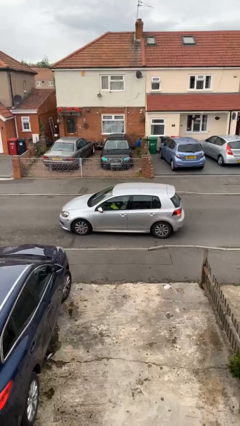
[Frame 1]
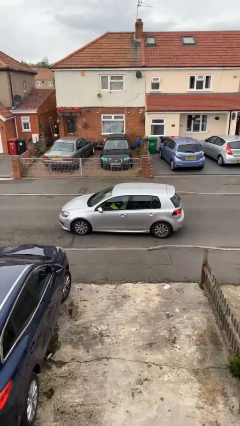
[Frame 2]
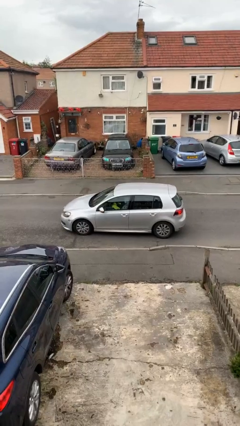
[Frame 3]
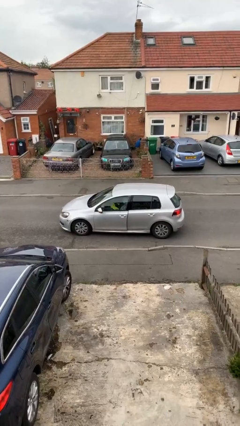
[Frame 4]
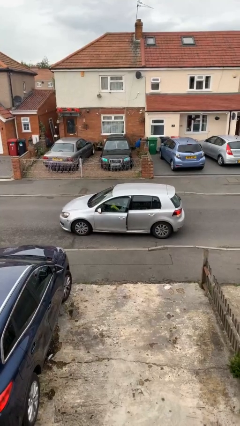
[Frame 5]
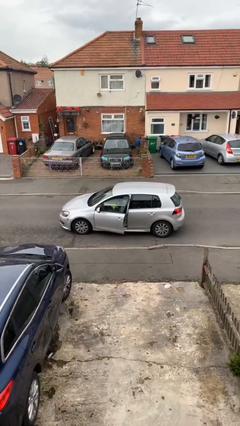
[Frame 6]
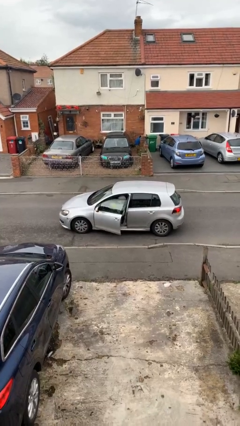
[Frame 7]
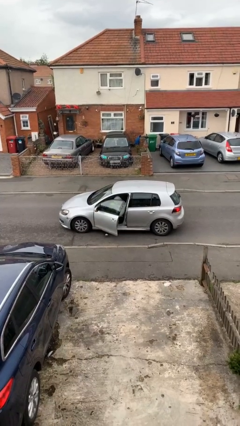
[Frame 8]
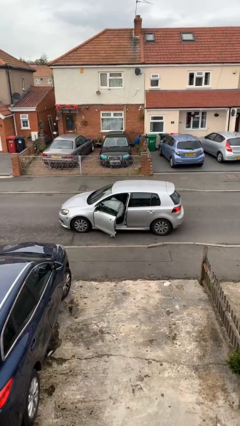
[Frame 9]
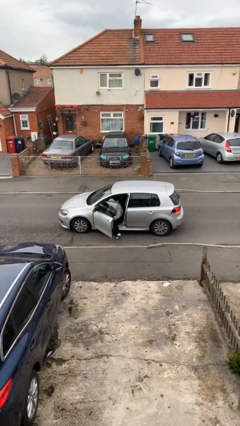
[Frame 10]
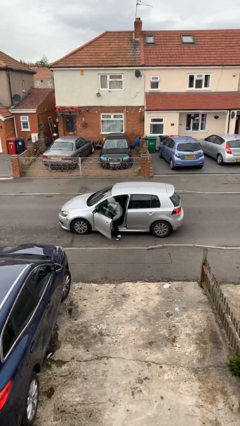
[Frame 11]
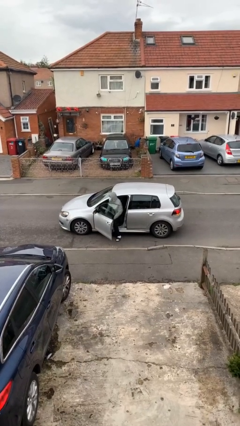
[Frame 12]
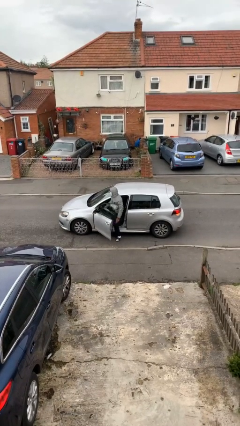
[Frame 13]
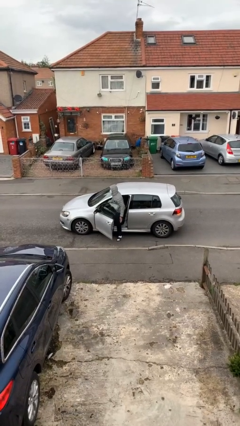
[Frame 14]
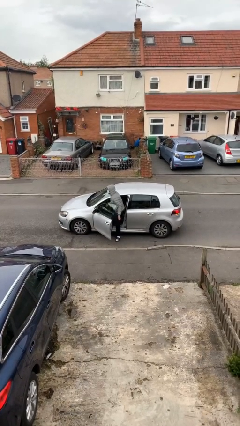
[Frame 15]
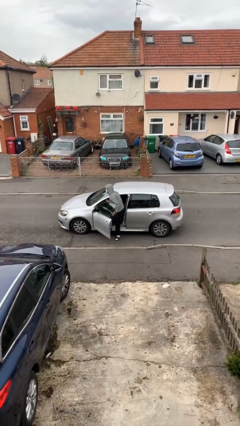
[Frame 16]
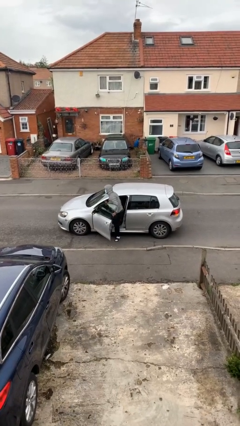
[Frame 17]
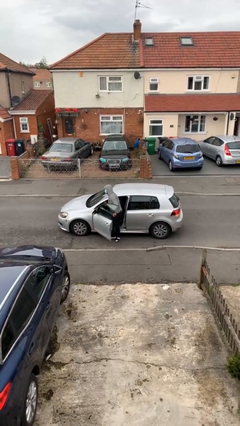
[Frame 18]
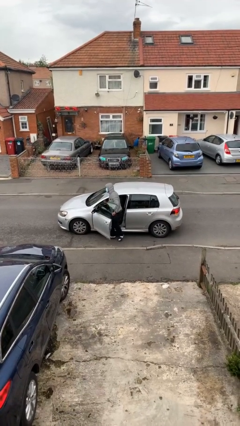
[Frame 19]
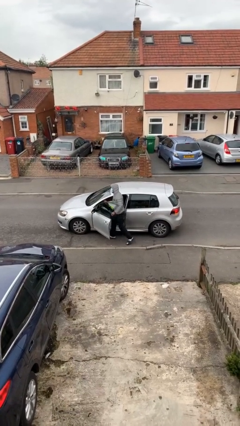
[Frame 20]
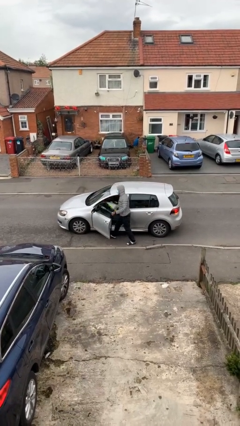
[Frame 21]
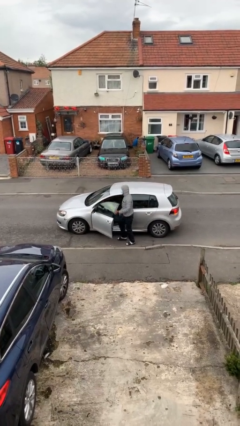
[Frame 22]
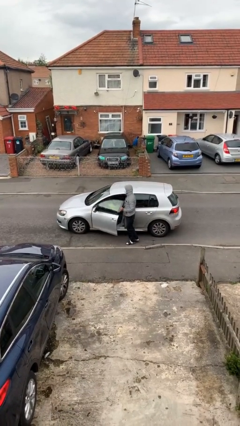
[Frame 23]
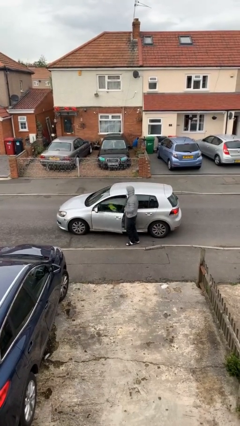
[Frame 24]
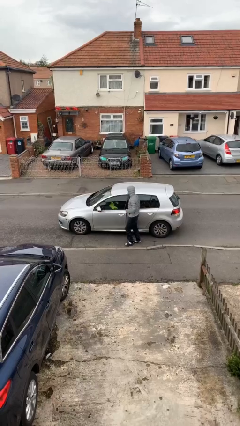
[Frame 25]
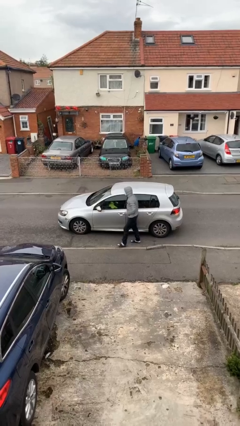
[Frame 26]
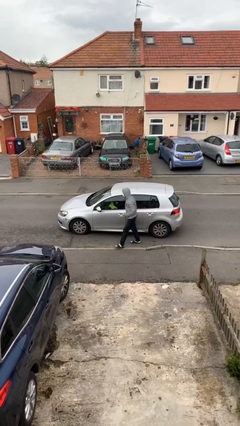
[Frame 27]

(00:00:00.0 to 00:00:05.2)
car drops off person

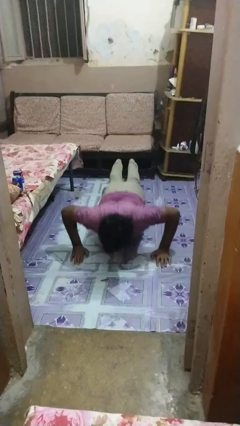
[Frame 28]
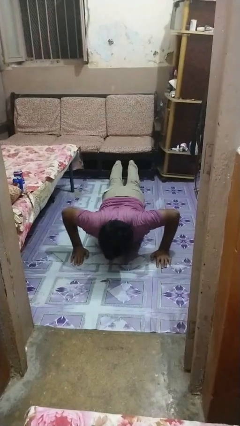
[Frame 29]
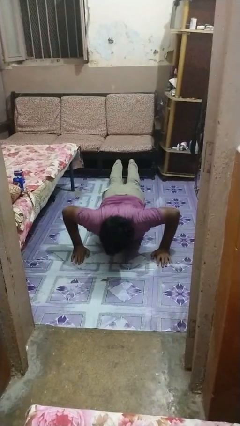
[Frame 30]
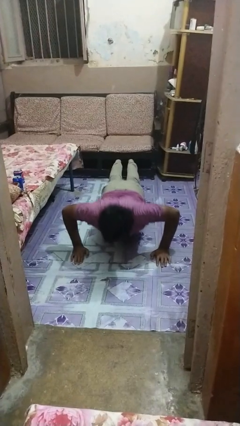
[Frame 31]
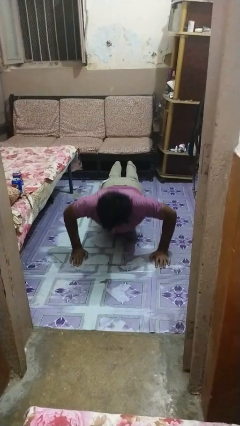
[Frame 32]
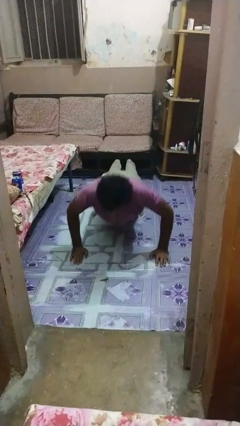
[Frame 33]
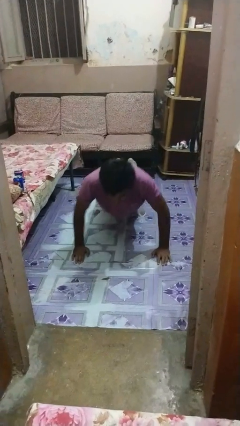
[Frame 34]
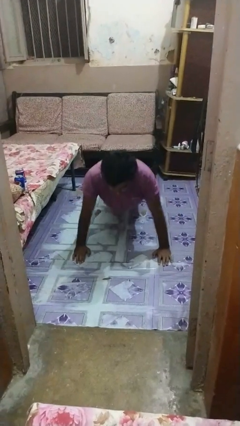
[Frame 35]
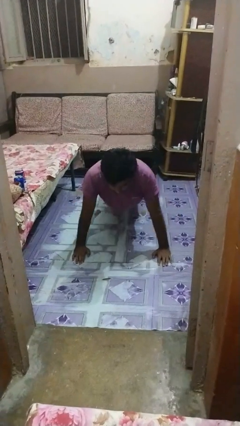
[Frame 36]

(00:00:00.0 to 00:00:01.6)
person exercises with pushup

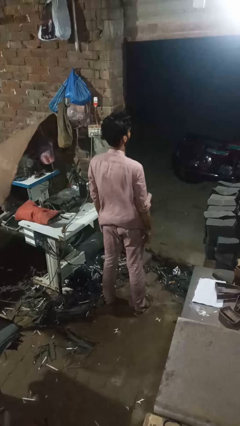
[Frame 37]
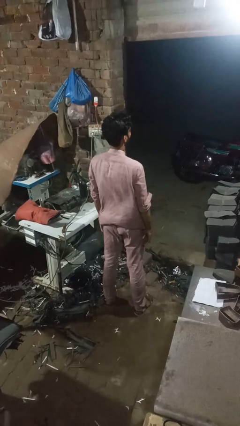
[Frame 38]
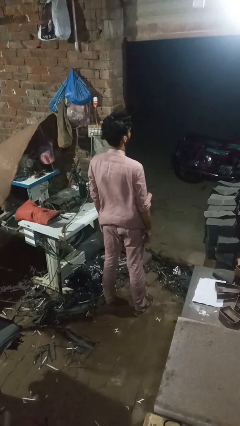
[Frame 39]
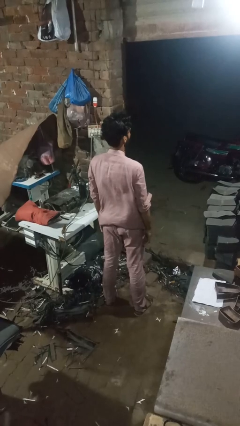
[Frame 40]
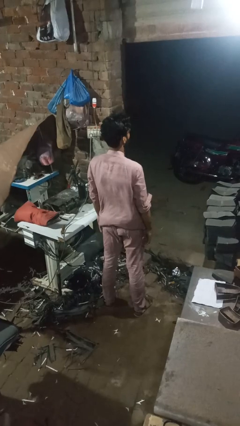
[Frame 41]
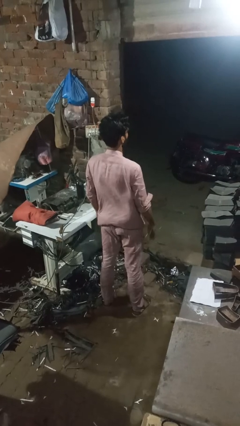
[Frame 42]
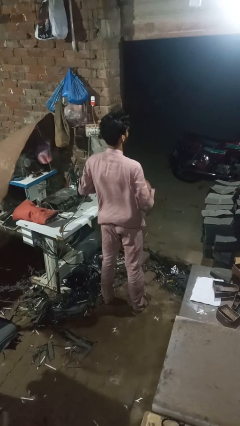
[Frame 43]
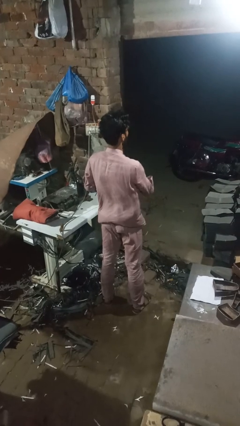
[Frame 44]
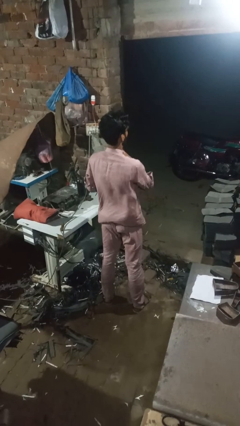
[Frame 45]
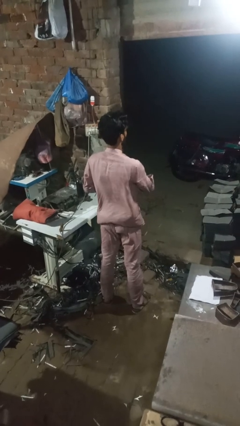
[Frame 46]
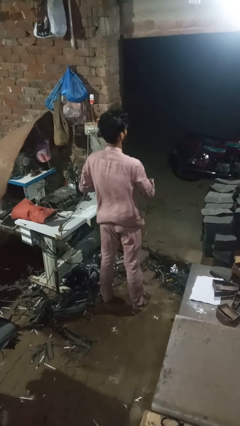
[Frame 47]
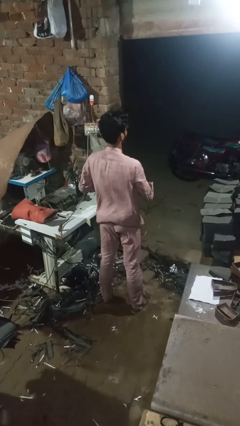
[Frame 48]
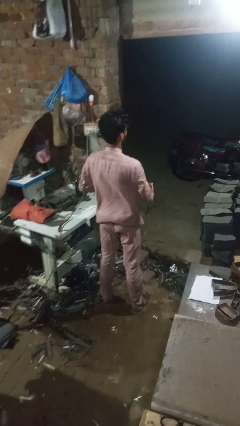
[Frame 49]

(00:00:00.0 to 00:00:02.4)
person unbuttons shirt

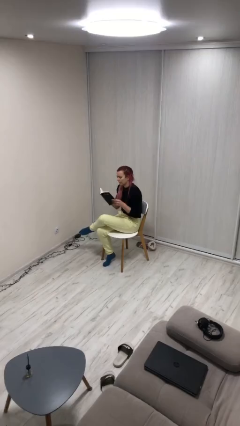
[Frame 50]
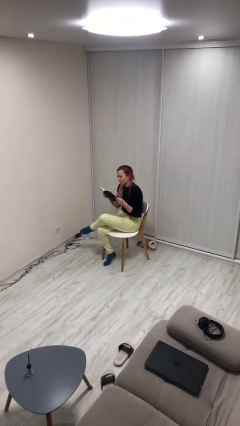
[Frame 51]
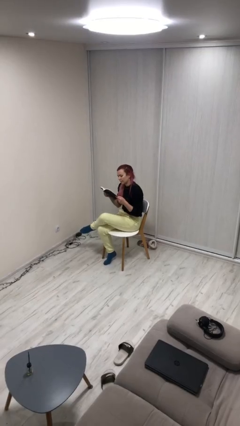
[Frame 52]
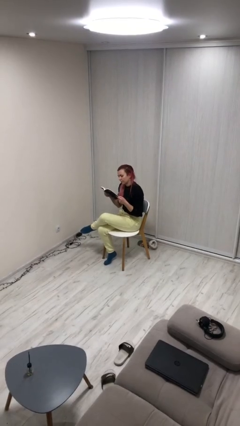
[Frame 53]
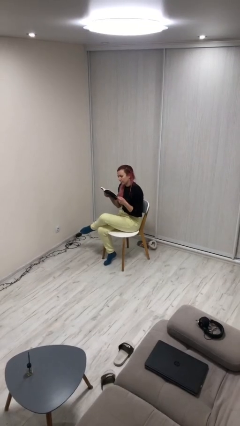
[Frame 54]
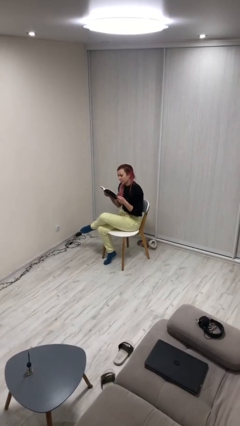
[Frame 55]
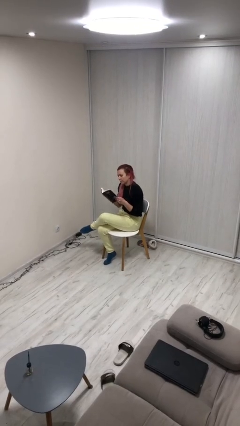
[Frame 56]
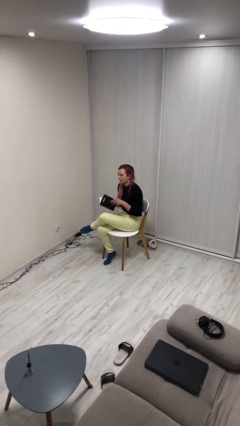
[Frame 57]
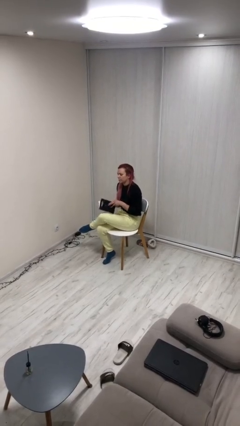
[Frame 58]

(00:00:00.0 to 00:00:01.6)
person reads document

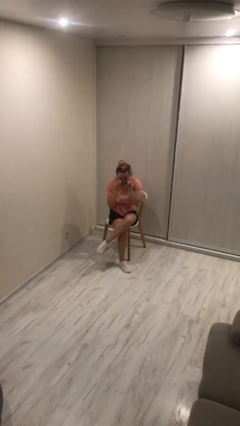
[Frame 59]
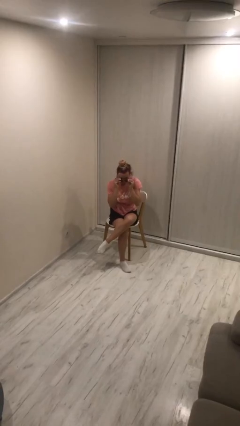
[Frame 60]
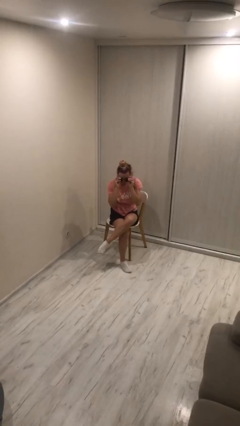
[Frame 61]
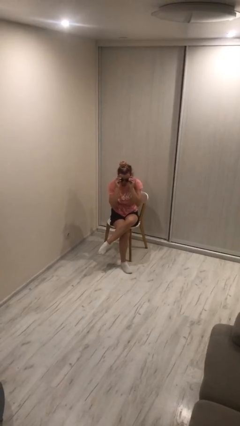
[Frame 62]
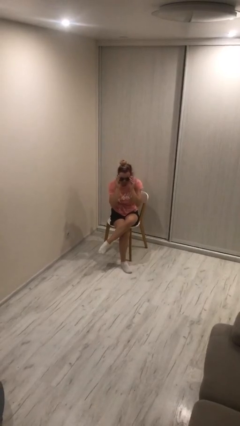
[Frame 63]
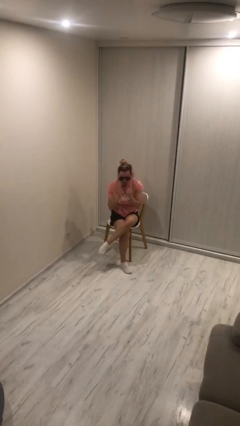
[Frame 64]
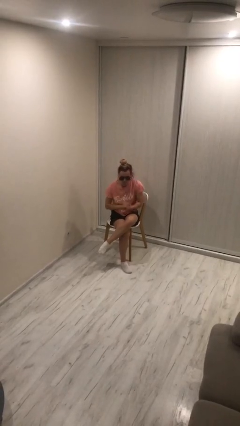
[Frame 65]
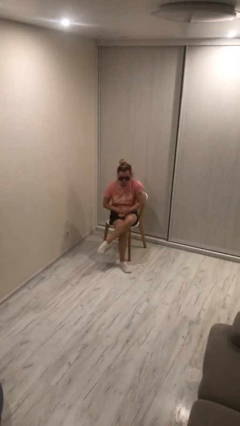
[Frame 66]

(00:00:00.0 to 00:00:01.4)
person puts on sunglasses

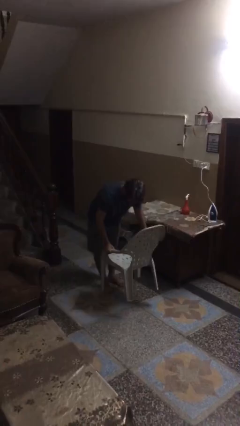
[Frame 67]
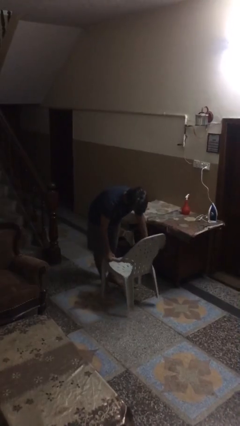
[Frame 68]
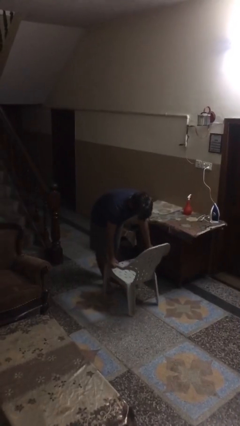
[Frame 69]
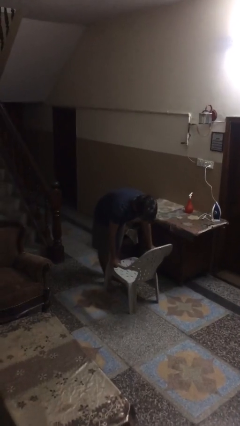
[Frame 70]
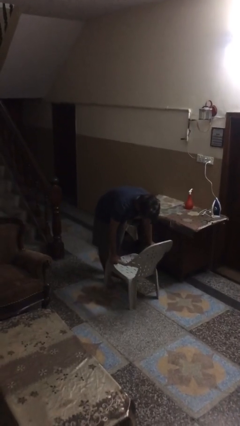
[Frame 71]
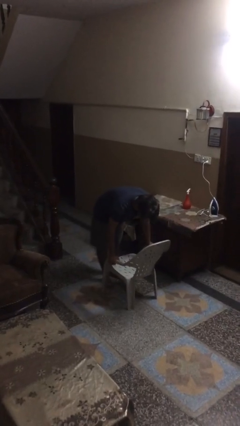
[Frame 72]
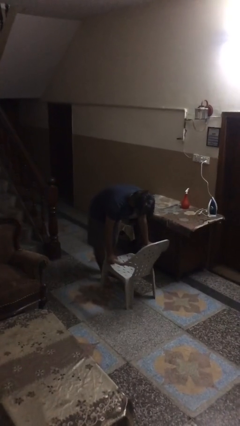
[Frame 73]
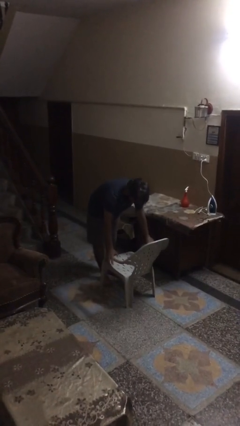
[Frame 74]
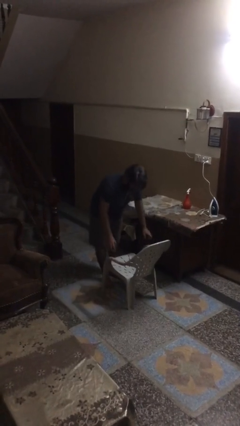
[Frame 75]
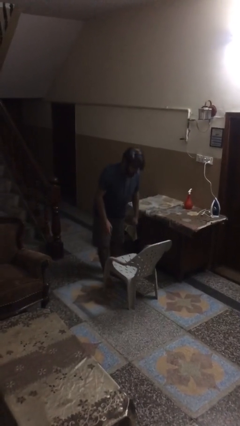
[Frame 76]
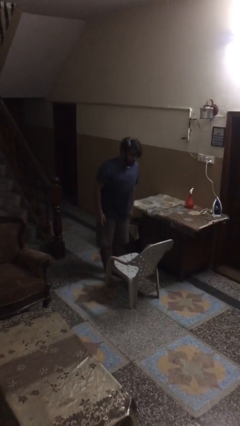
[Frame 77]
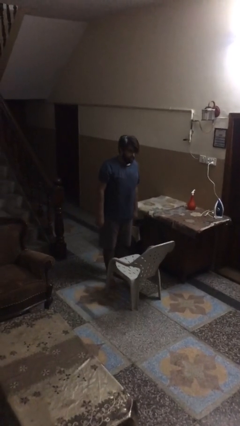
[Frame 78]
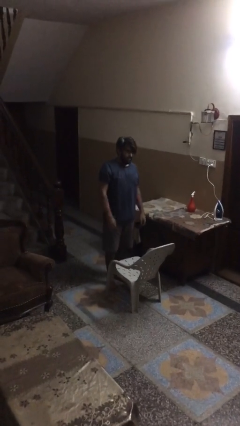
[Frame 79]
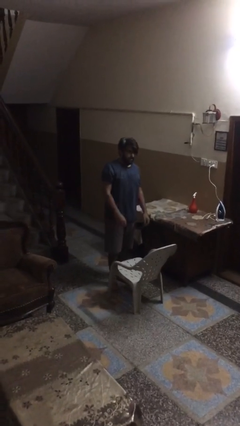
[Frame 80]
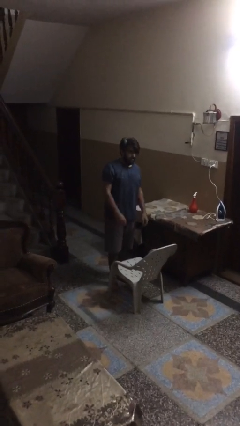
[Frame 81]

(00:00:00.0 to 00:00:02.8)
person puts down object on floor

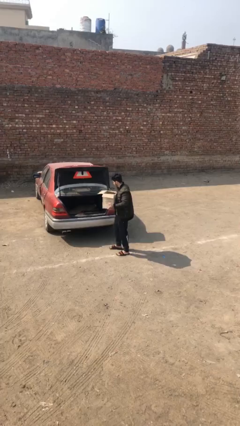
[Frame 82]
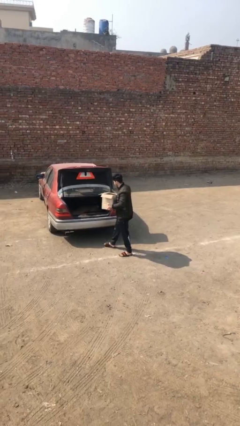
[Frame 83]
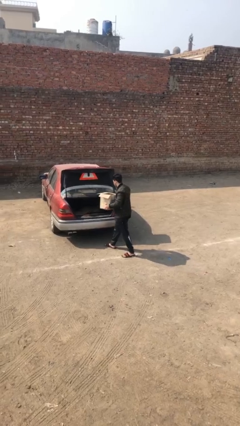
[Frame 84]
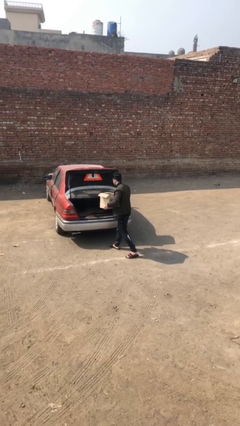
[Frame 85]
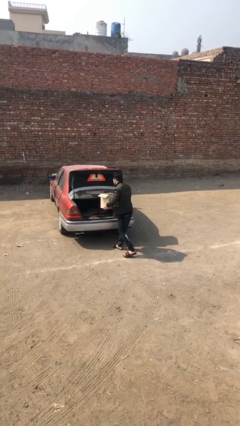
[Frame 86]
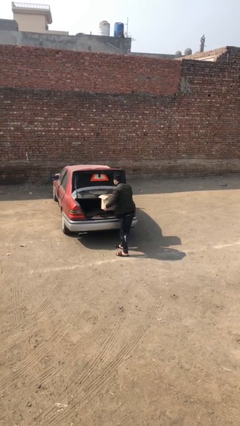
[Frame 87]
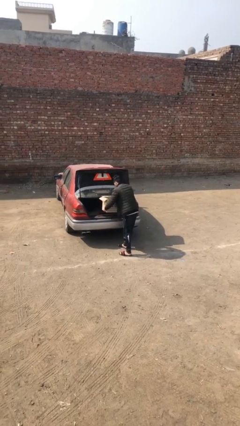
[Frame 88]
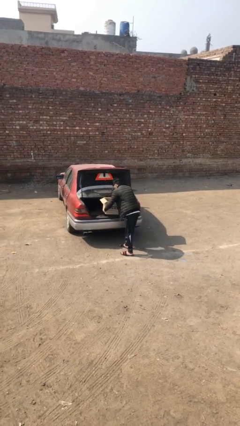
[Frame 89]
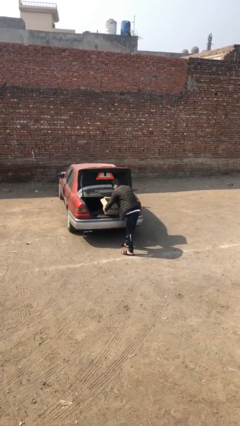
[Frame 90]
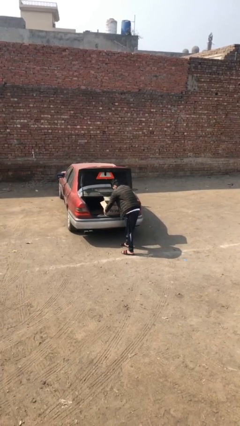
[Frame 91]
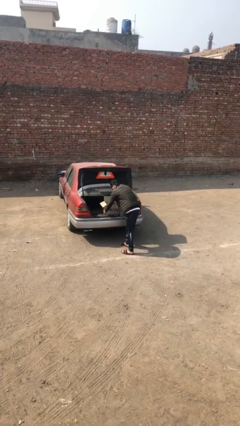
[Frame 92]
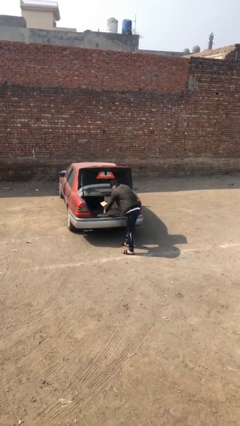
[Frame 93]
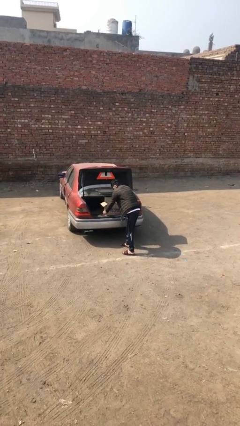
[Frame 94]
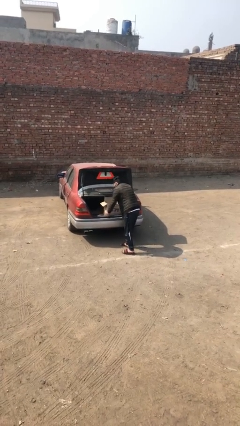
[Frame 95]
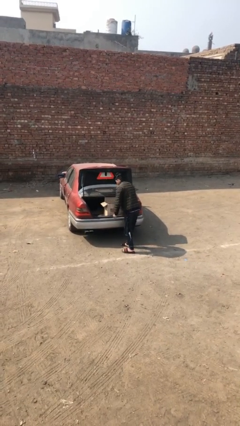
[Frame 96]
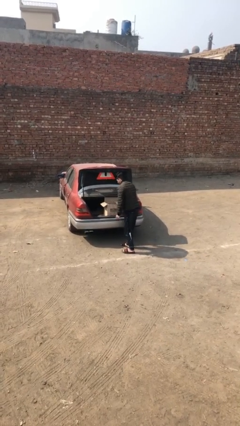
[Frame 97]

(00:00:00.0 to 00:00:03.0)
person loads car
